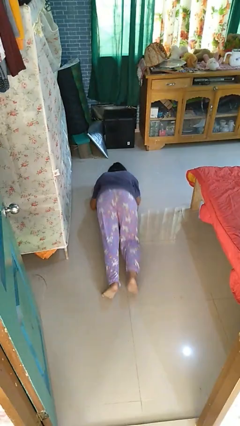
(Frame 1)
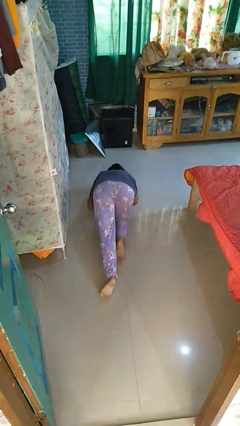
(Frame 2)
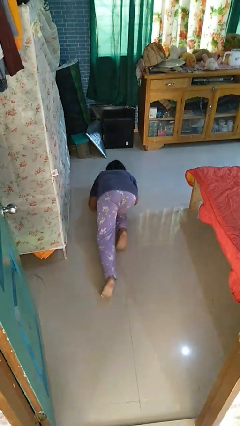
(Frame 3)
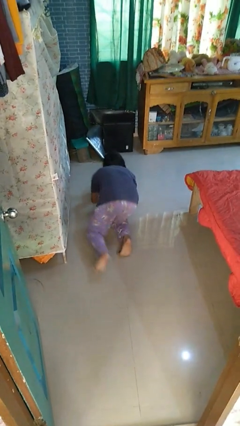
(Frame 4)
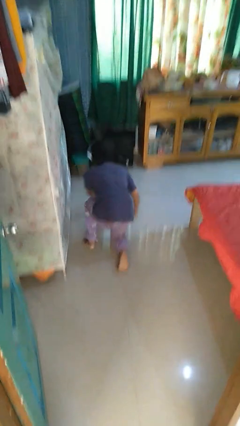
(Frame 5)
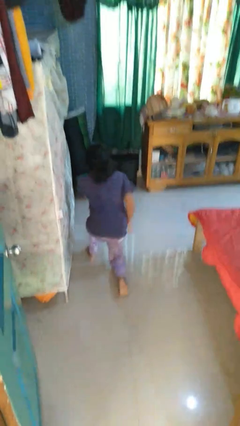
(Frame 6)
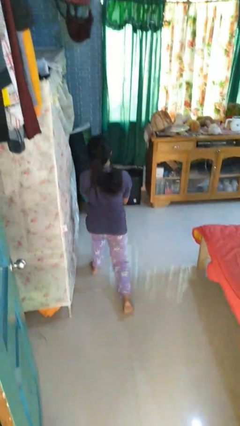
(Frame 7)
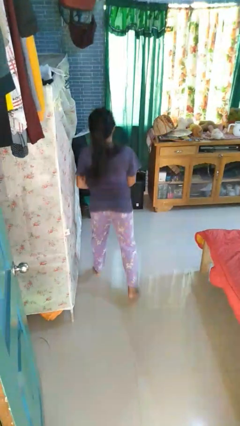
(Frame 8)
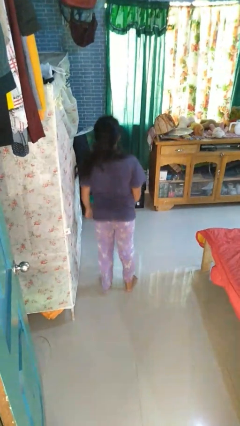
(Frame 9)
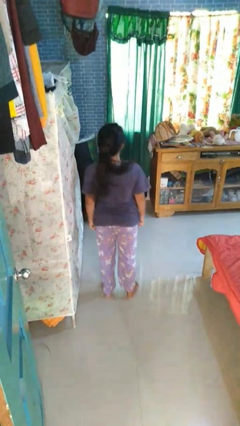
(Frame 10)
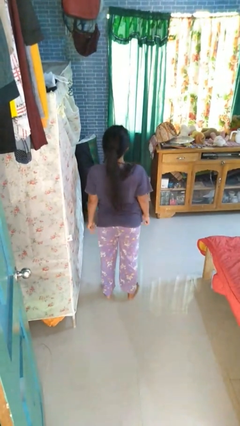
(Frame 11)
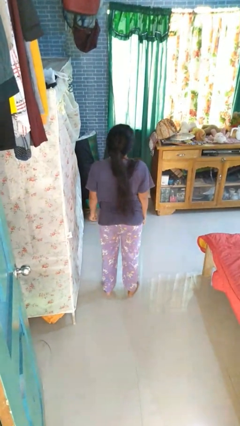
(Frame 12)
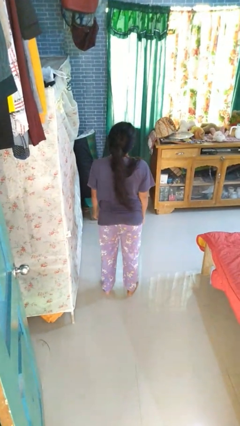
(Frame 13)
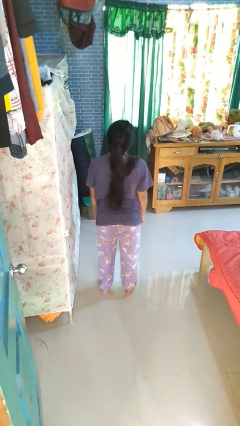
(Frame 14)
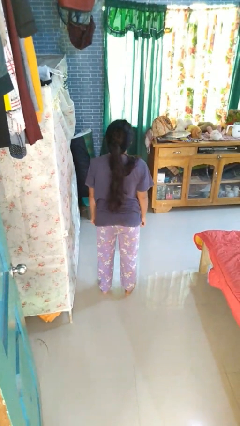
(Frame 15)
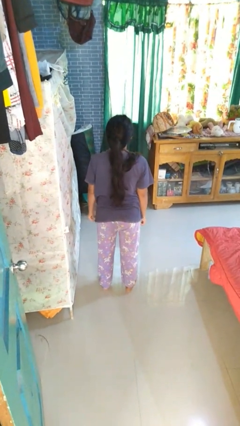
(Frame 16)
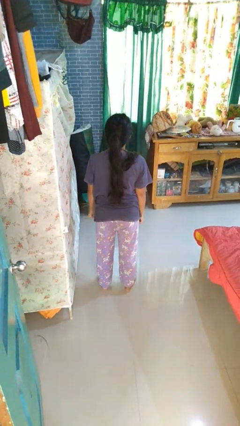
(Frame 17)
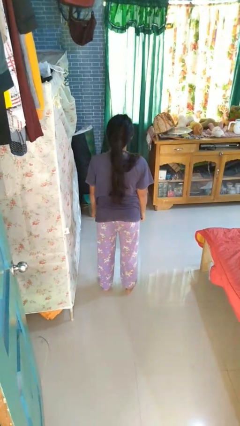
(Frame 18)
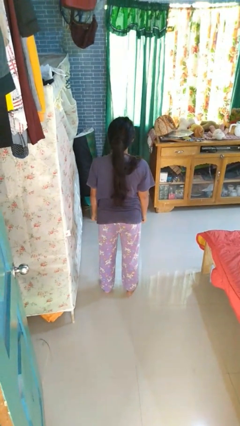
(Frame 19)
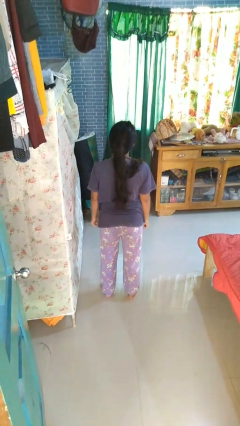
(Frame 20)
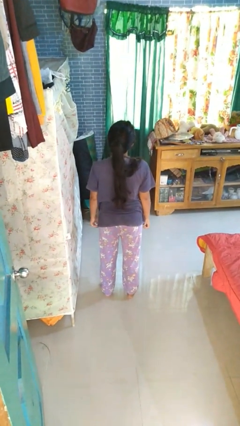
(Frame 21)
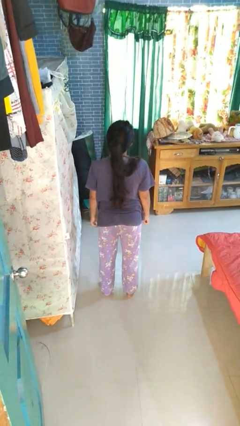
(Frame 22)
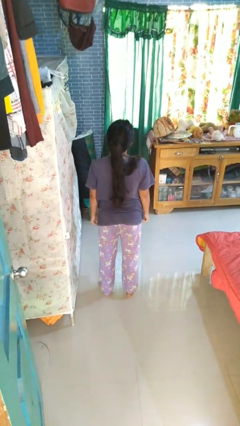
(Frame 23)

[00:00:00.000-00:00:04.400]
person stands up from floor

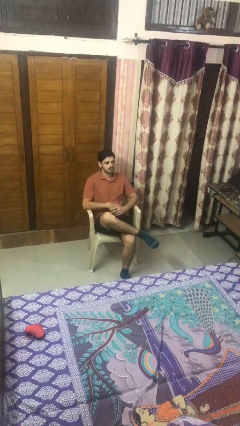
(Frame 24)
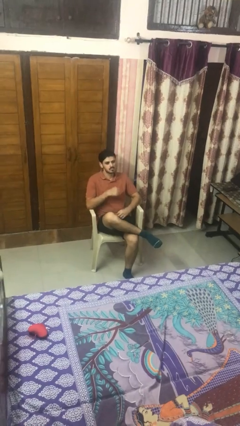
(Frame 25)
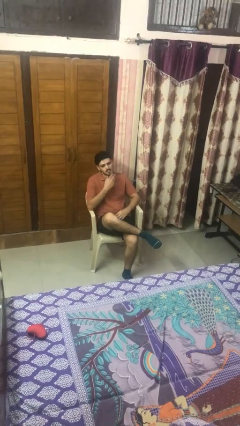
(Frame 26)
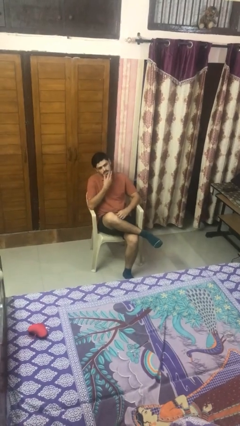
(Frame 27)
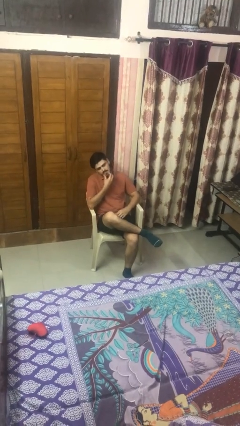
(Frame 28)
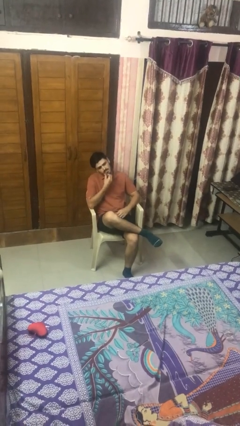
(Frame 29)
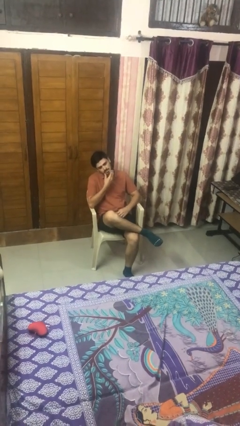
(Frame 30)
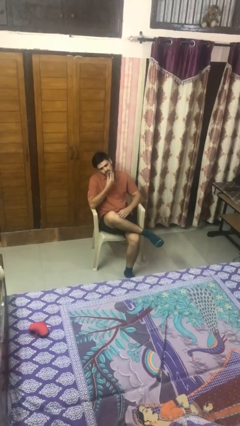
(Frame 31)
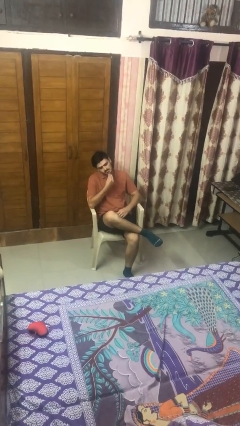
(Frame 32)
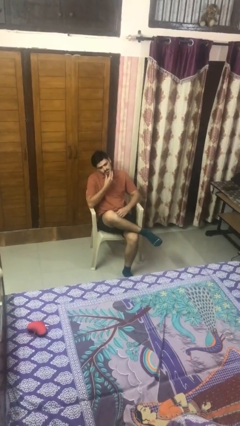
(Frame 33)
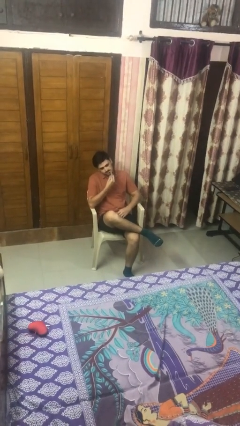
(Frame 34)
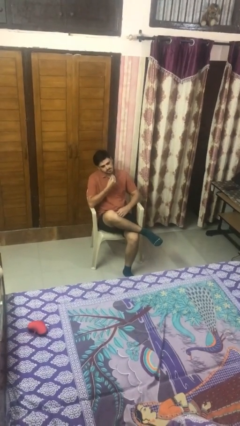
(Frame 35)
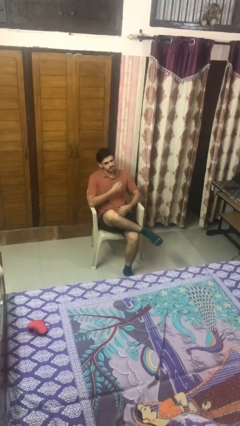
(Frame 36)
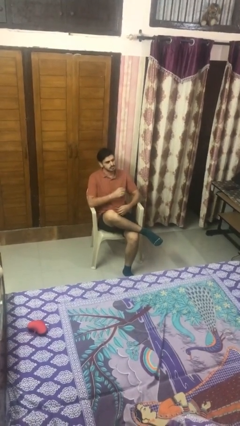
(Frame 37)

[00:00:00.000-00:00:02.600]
person strokes chin

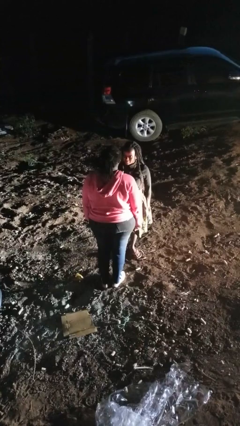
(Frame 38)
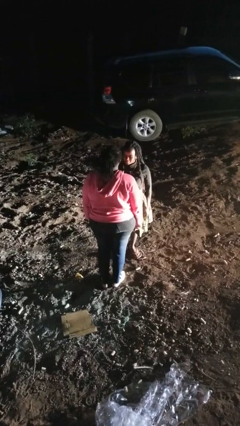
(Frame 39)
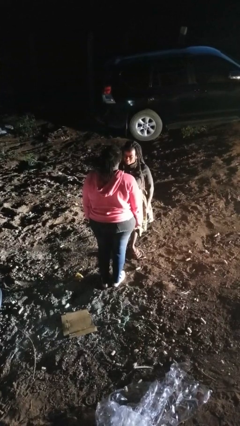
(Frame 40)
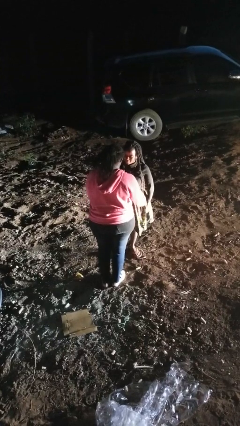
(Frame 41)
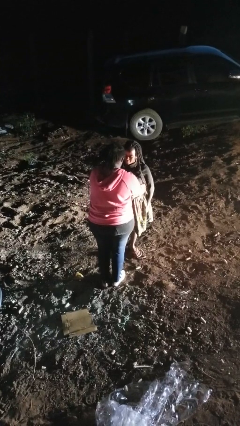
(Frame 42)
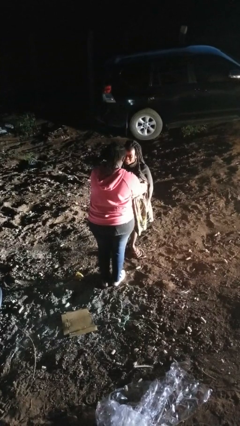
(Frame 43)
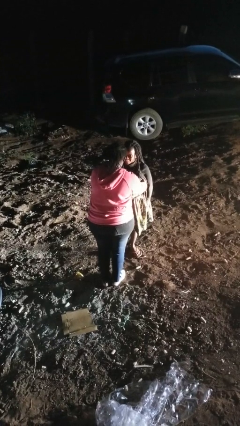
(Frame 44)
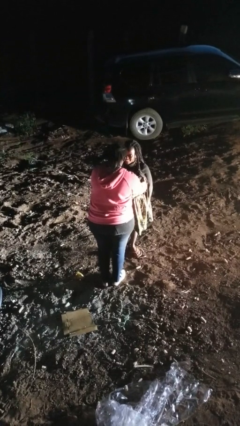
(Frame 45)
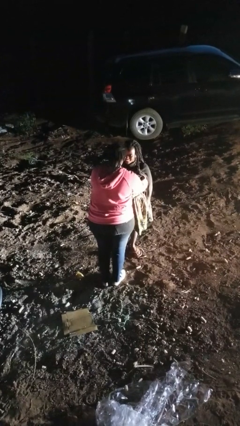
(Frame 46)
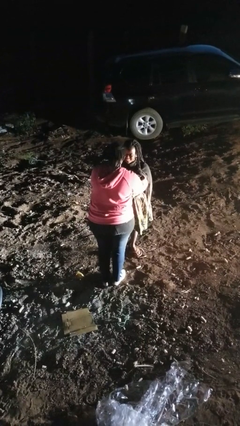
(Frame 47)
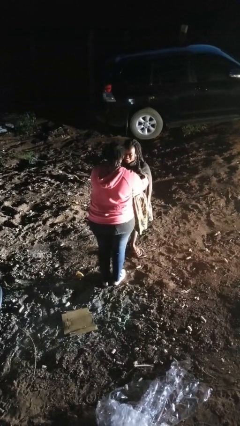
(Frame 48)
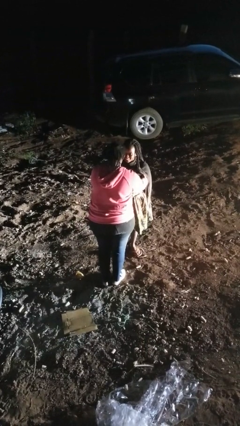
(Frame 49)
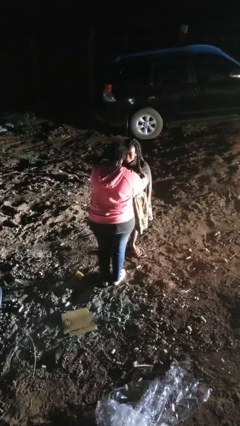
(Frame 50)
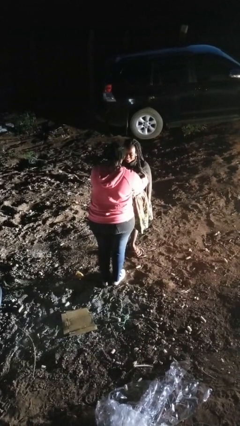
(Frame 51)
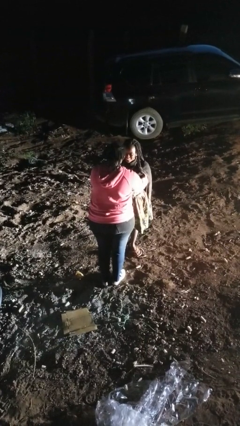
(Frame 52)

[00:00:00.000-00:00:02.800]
person tickles person

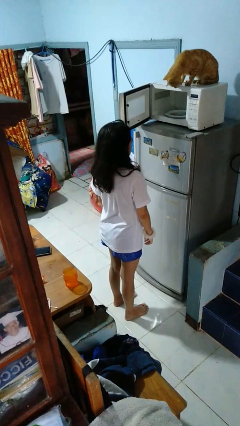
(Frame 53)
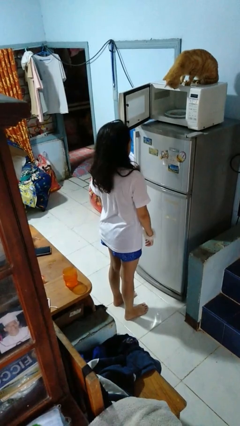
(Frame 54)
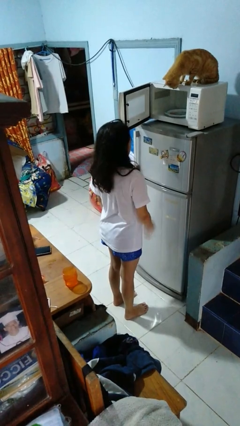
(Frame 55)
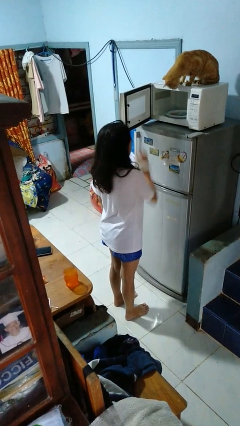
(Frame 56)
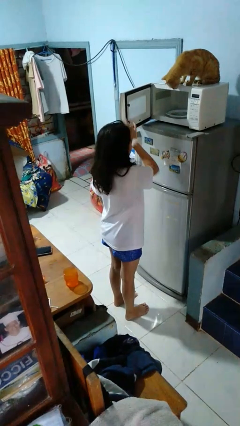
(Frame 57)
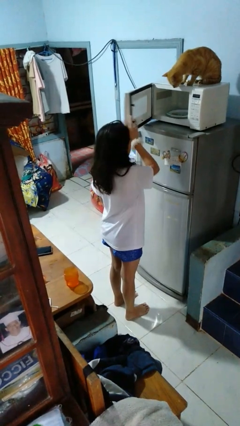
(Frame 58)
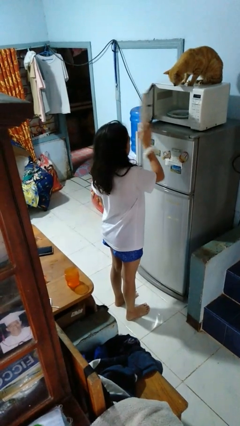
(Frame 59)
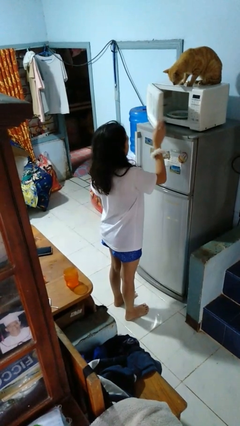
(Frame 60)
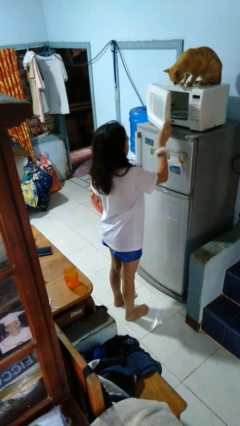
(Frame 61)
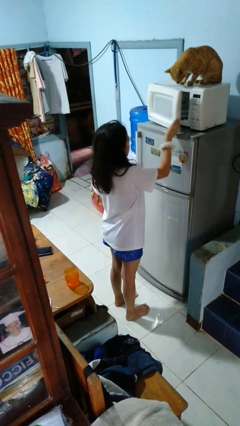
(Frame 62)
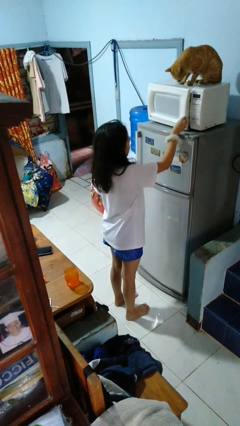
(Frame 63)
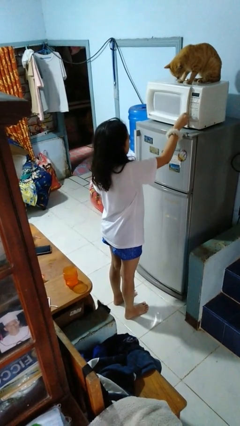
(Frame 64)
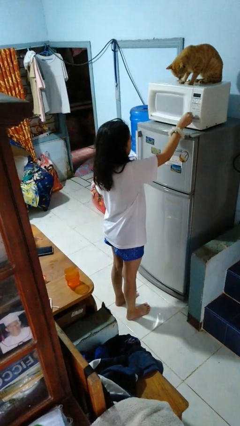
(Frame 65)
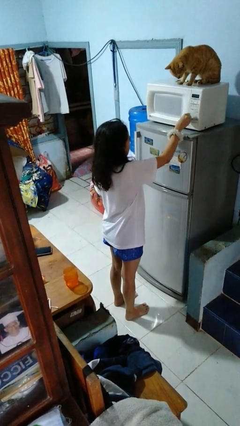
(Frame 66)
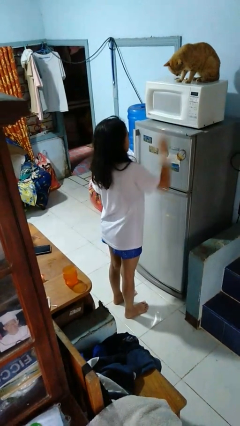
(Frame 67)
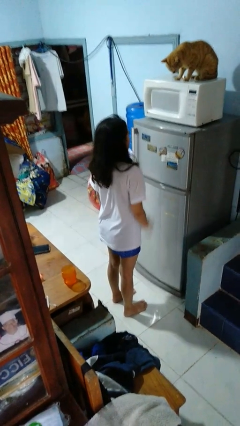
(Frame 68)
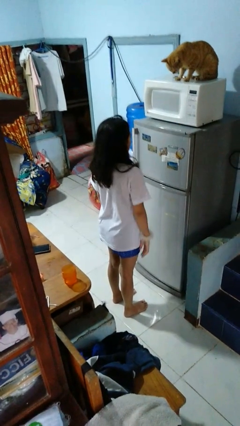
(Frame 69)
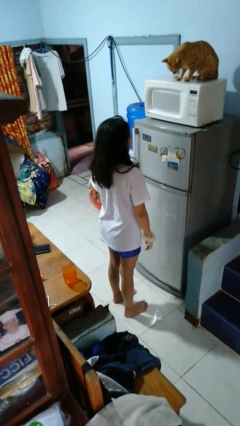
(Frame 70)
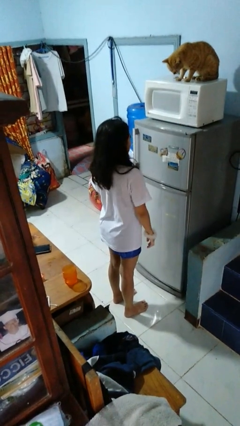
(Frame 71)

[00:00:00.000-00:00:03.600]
person closes microwave

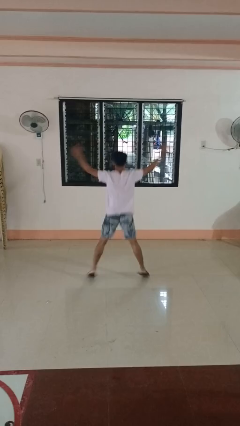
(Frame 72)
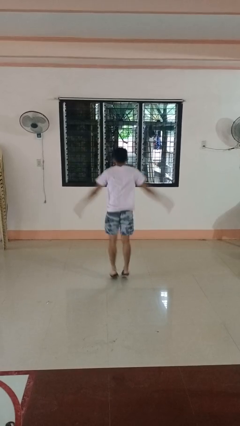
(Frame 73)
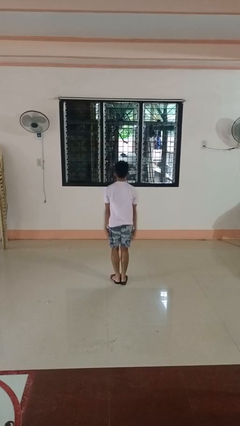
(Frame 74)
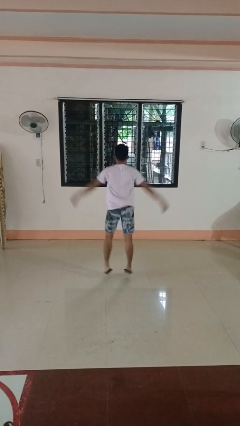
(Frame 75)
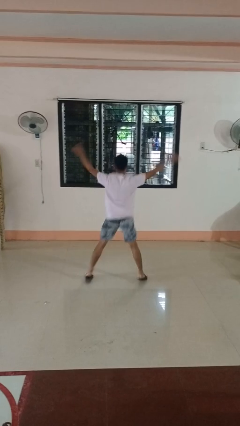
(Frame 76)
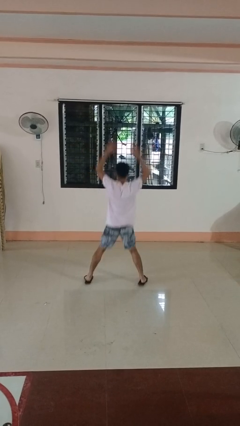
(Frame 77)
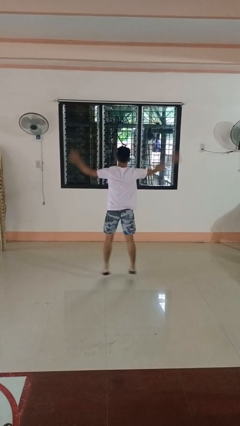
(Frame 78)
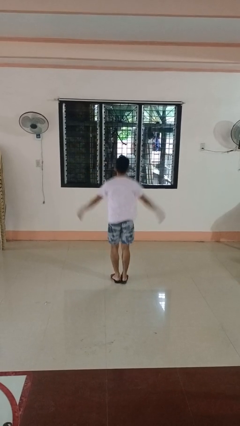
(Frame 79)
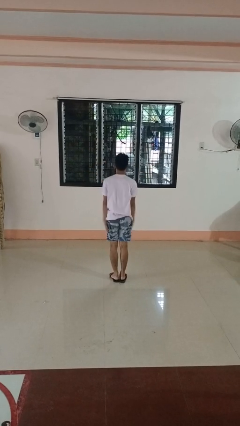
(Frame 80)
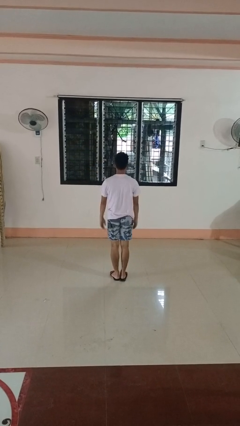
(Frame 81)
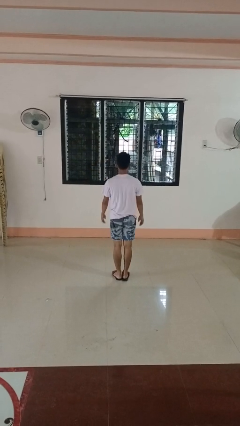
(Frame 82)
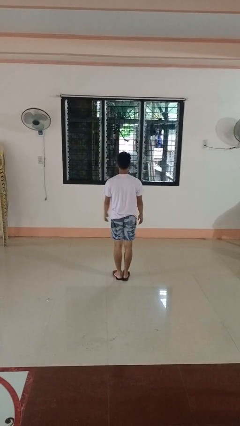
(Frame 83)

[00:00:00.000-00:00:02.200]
person exercises with jumping jacks

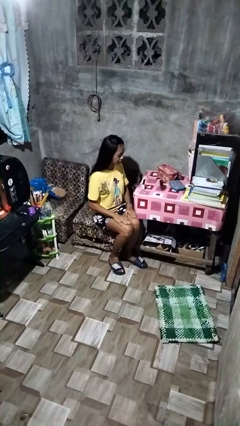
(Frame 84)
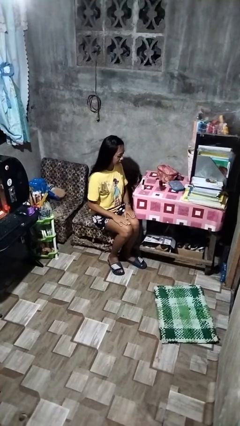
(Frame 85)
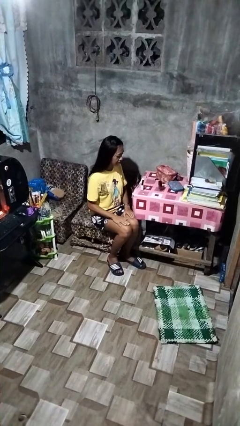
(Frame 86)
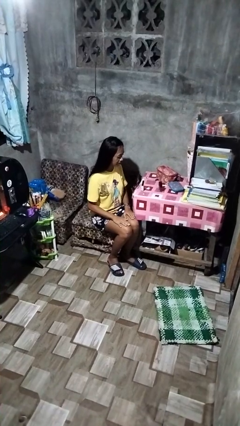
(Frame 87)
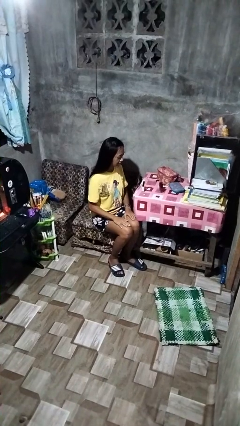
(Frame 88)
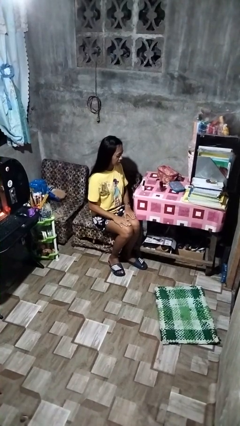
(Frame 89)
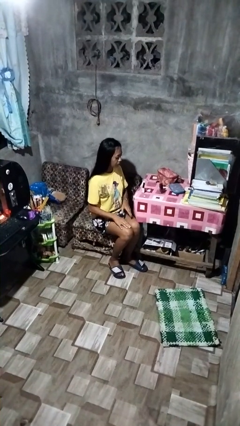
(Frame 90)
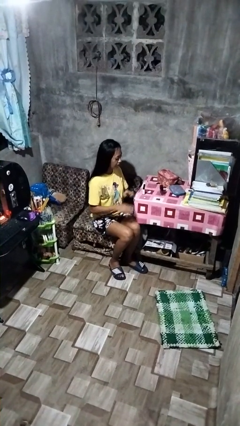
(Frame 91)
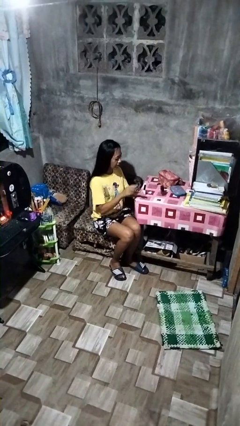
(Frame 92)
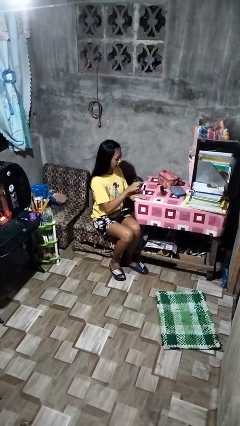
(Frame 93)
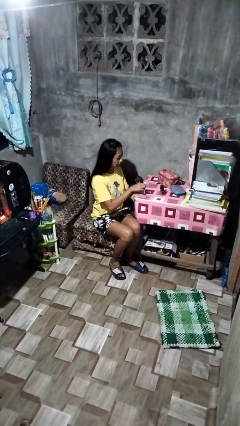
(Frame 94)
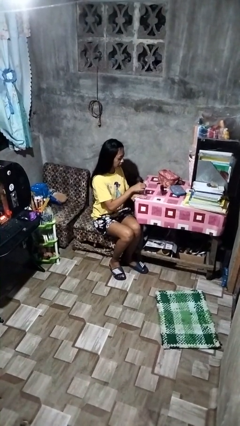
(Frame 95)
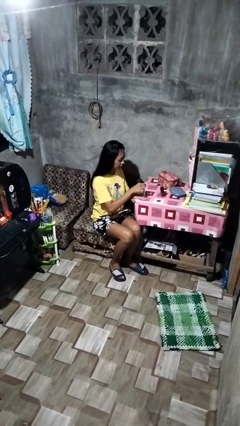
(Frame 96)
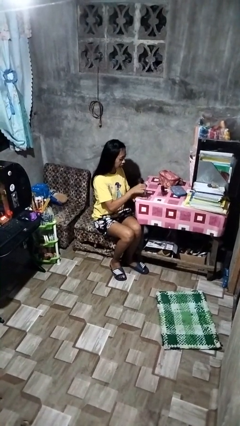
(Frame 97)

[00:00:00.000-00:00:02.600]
person paints fingernails
